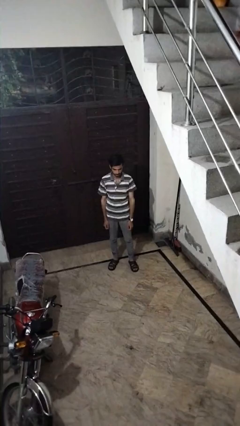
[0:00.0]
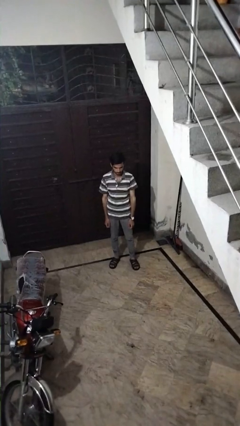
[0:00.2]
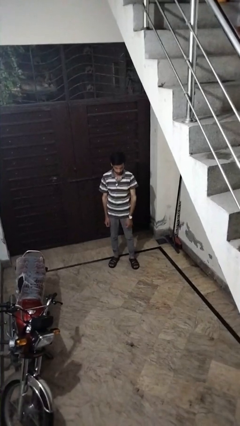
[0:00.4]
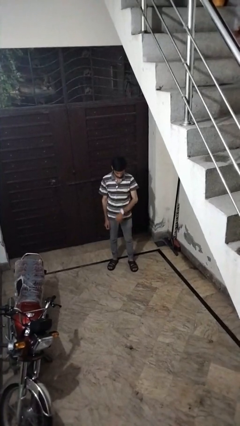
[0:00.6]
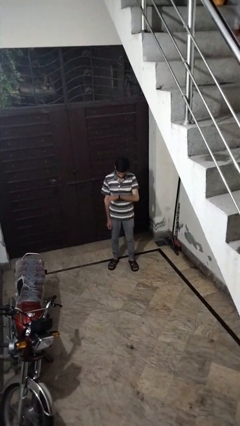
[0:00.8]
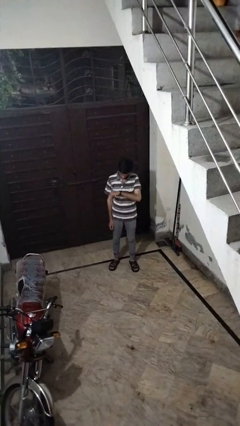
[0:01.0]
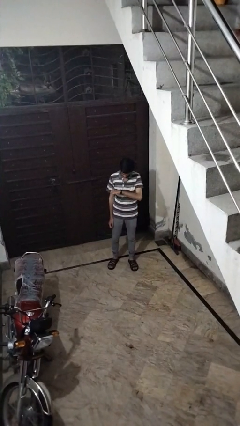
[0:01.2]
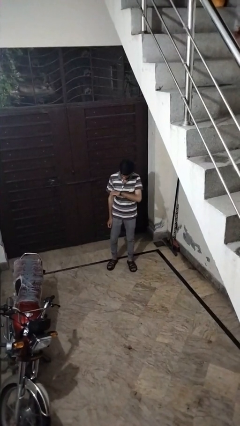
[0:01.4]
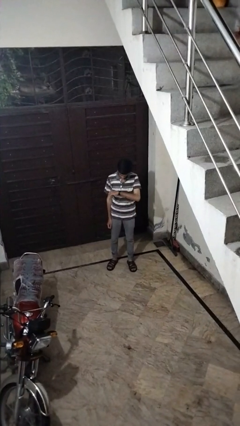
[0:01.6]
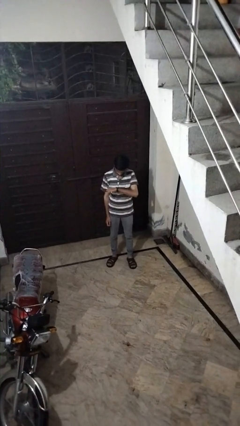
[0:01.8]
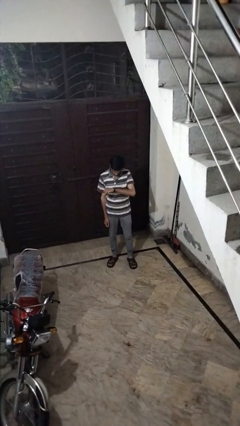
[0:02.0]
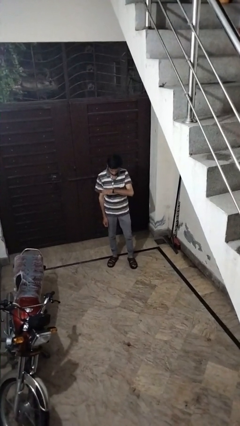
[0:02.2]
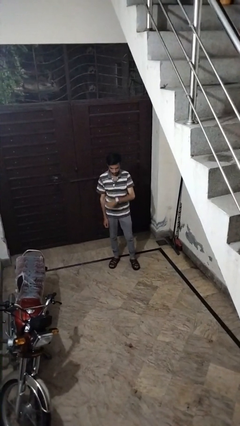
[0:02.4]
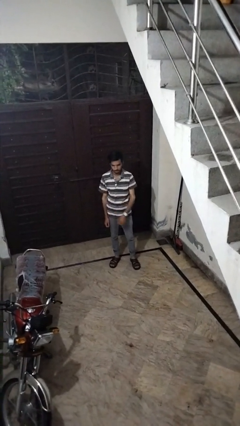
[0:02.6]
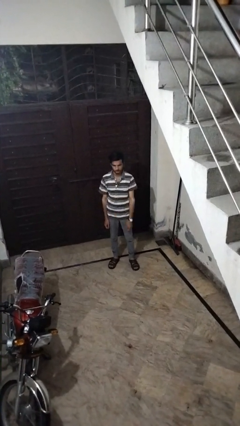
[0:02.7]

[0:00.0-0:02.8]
person looks at wristwatch

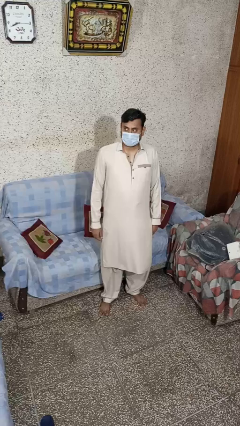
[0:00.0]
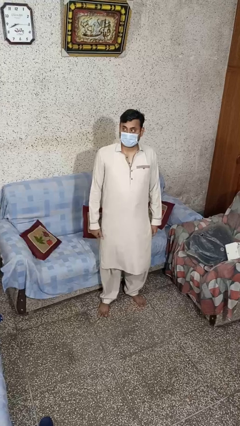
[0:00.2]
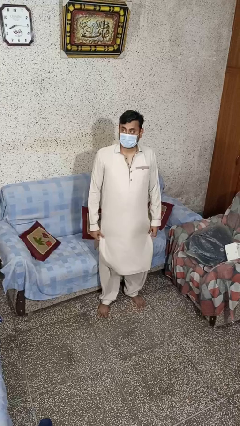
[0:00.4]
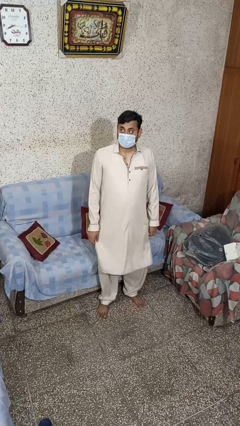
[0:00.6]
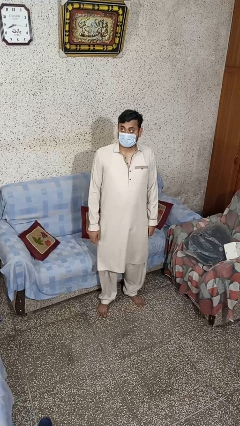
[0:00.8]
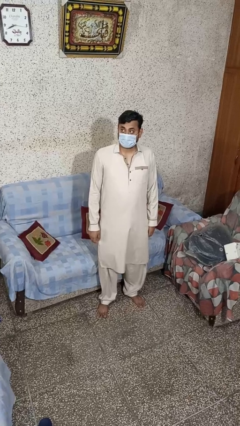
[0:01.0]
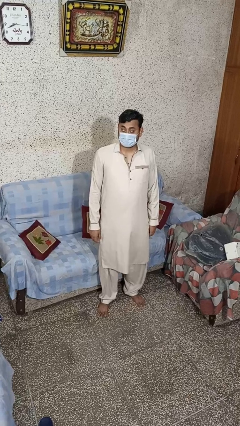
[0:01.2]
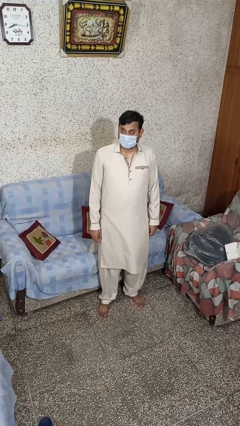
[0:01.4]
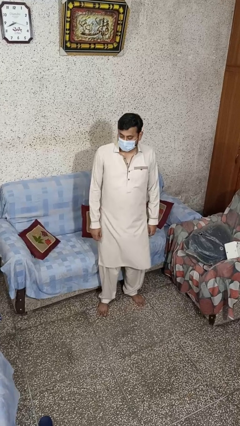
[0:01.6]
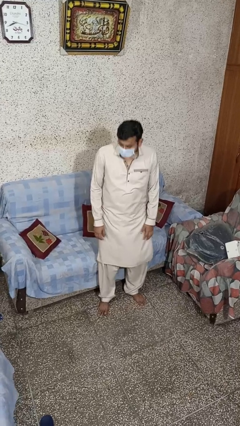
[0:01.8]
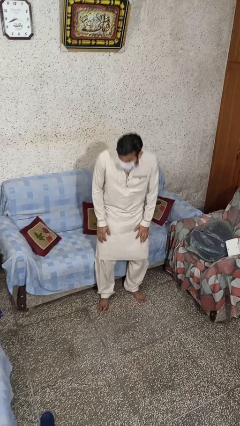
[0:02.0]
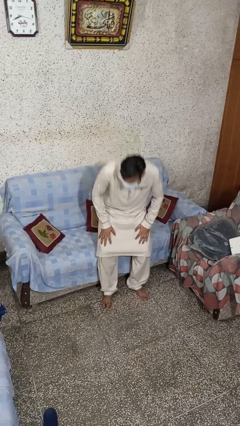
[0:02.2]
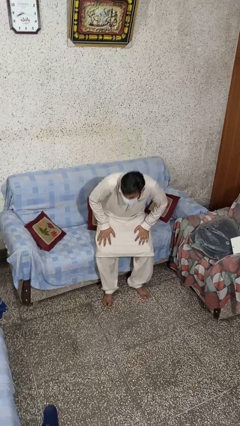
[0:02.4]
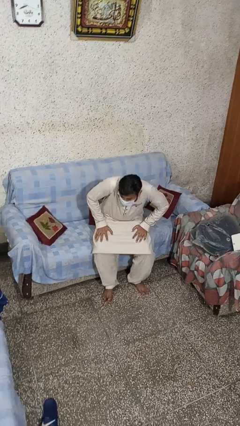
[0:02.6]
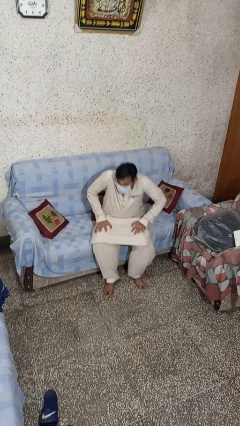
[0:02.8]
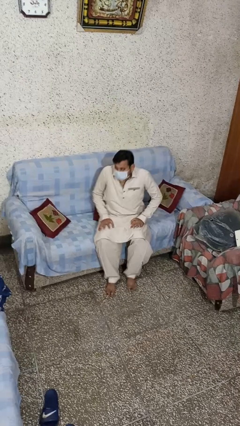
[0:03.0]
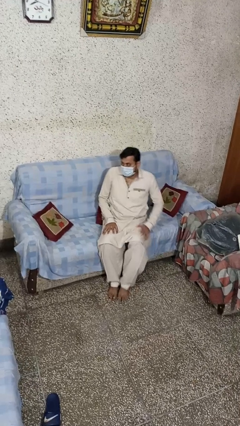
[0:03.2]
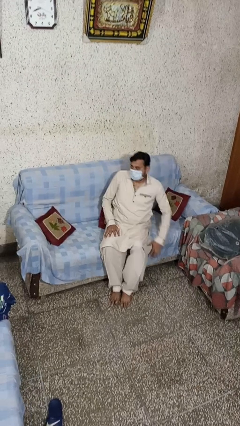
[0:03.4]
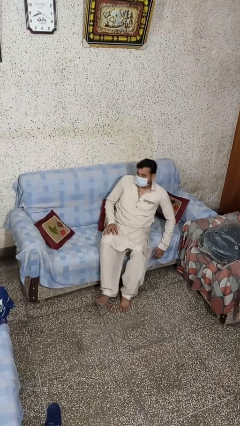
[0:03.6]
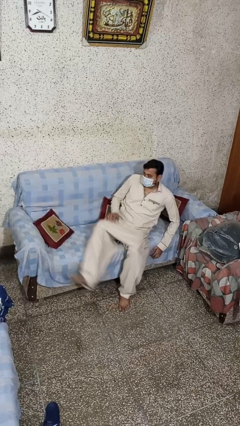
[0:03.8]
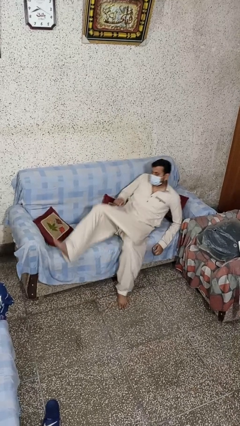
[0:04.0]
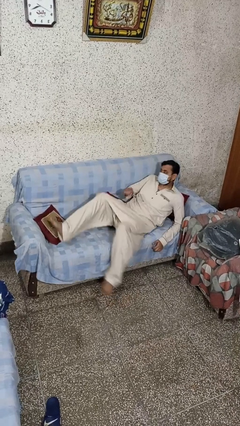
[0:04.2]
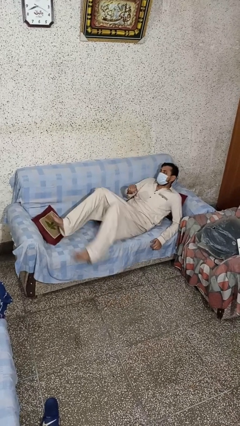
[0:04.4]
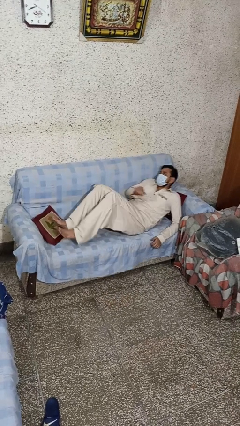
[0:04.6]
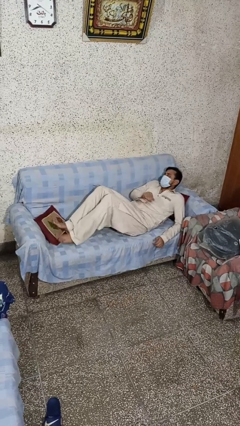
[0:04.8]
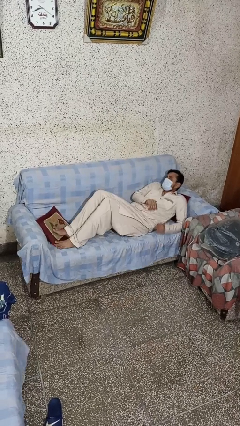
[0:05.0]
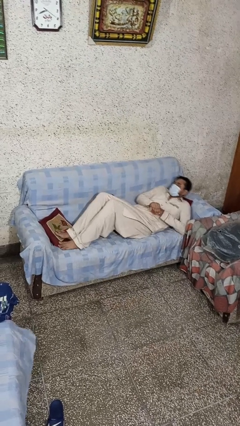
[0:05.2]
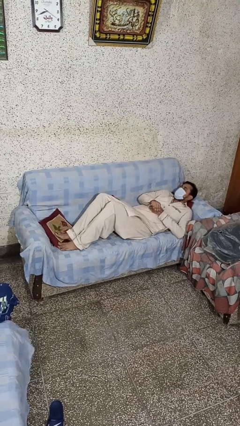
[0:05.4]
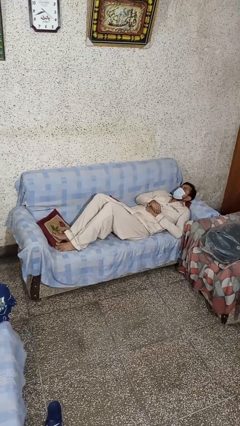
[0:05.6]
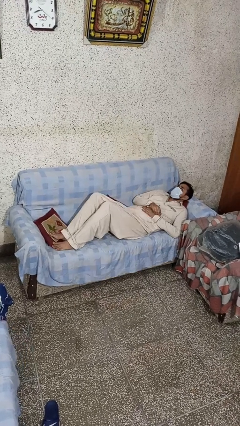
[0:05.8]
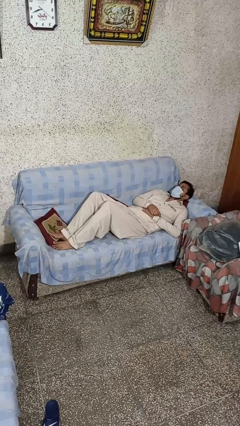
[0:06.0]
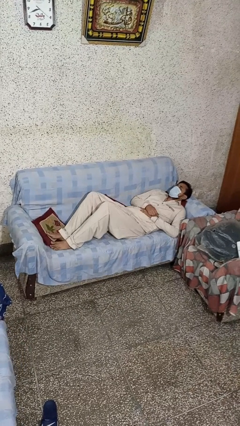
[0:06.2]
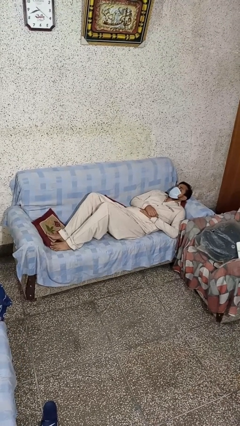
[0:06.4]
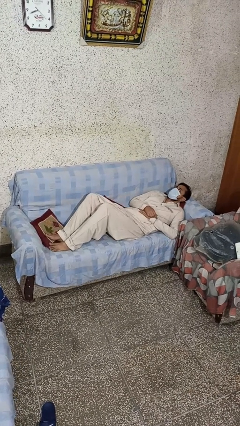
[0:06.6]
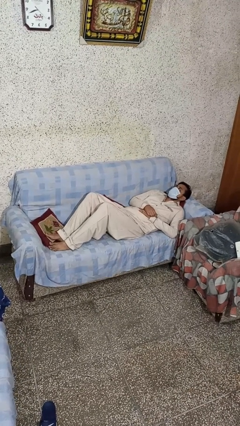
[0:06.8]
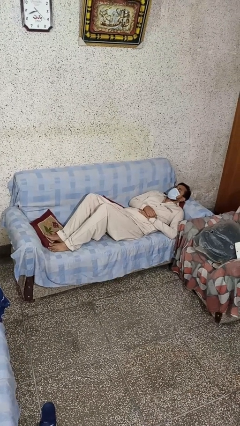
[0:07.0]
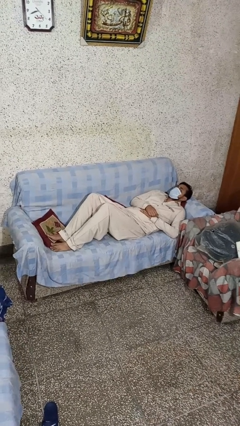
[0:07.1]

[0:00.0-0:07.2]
person lies down on couch

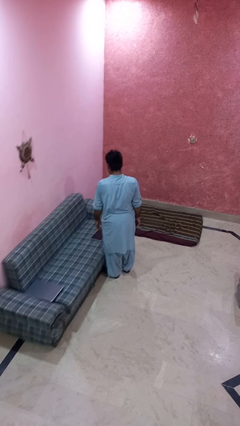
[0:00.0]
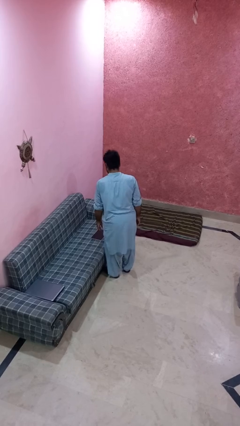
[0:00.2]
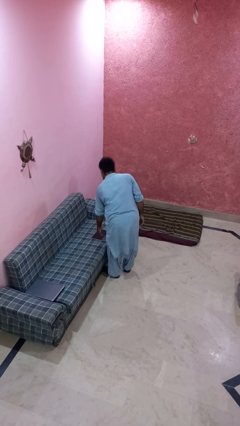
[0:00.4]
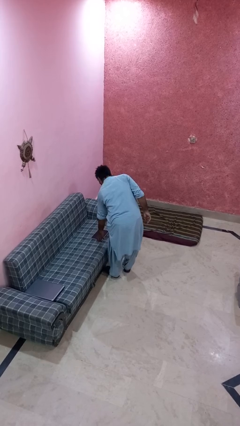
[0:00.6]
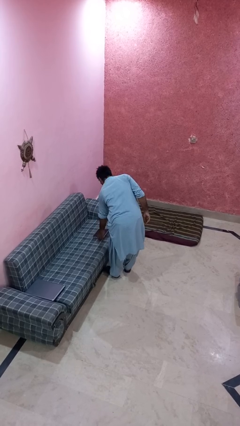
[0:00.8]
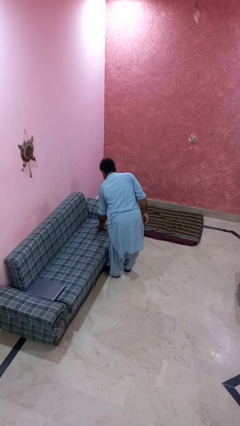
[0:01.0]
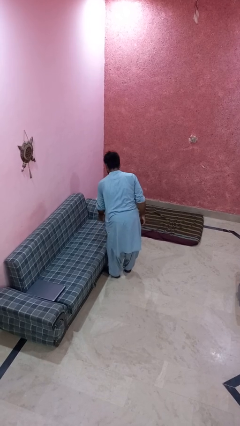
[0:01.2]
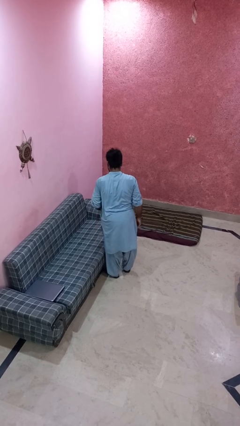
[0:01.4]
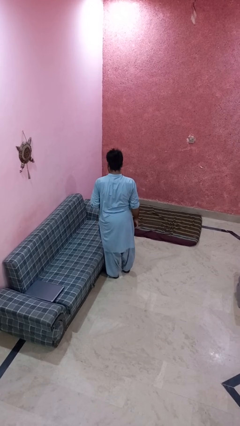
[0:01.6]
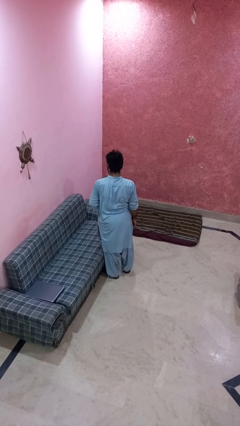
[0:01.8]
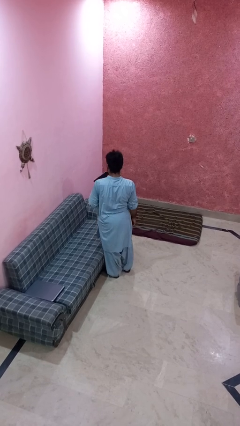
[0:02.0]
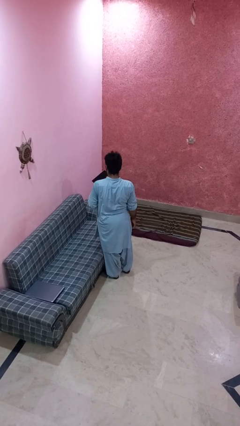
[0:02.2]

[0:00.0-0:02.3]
person picks up object from couch

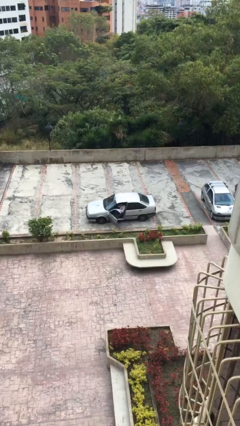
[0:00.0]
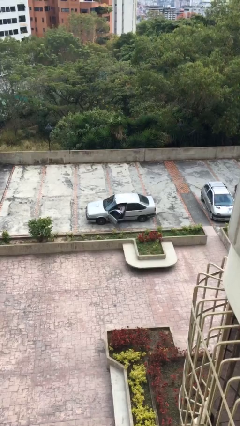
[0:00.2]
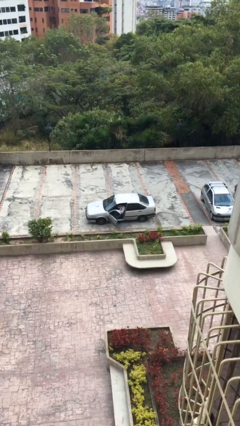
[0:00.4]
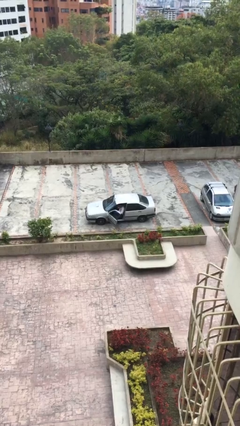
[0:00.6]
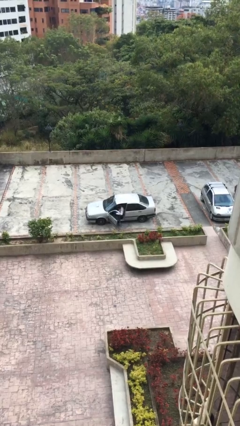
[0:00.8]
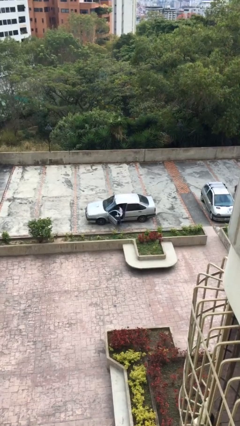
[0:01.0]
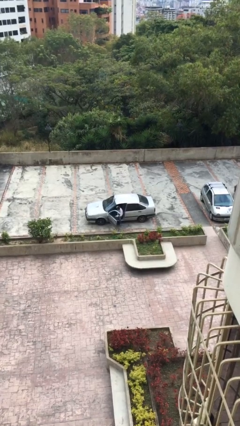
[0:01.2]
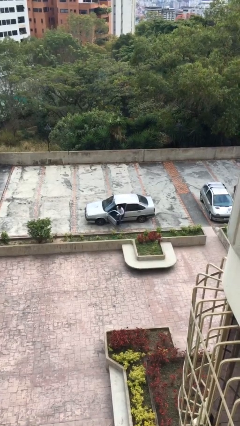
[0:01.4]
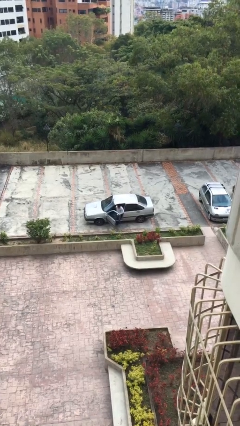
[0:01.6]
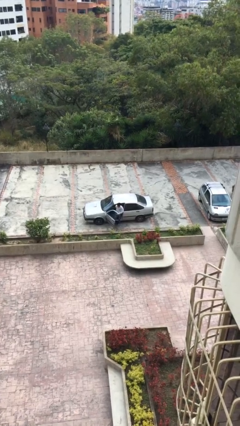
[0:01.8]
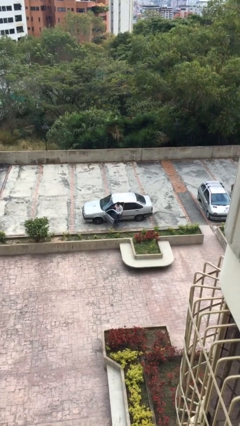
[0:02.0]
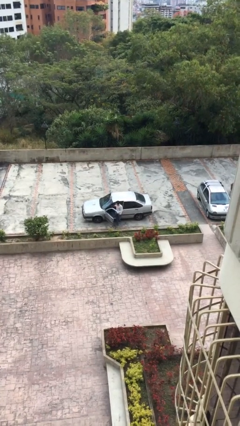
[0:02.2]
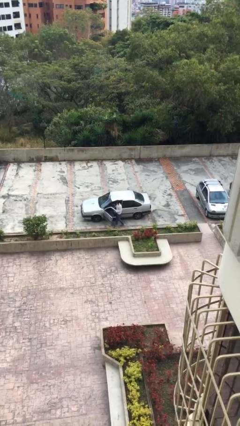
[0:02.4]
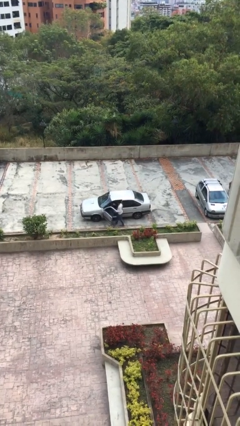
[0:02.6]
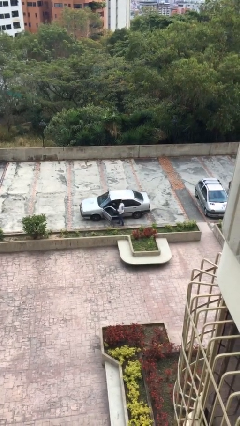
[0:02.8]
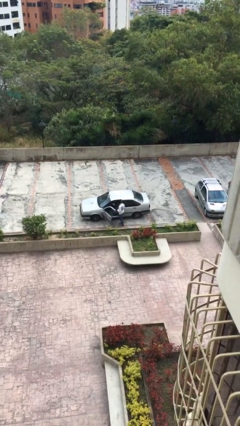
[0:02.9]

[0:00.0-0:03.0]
person exits car

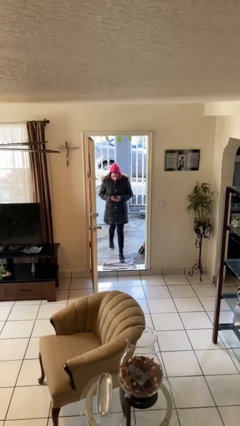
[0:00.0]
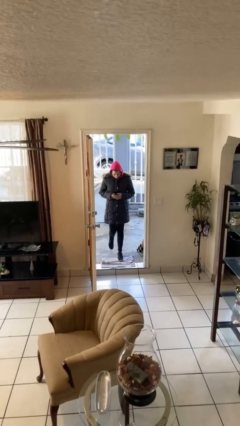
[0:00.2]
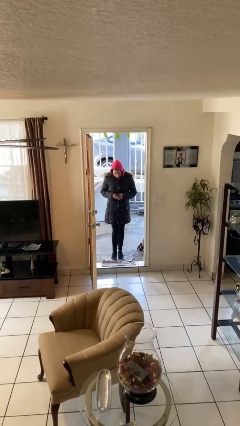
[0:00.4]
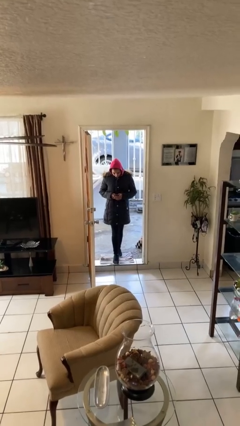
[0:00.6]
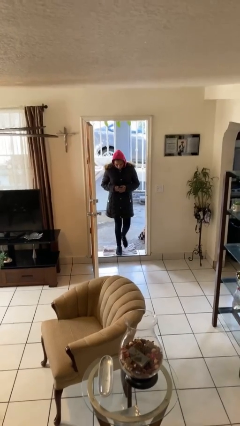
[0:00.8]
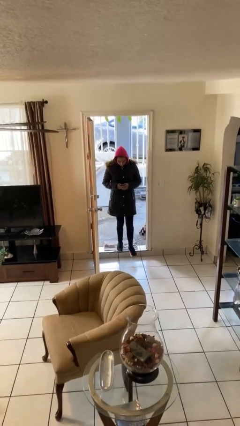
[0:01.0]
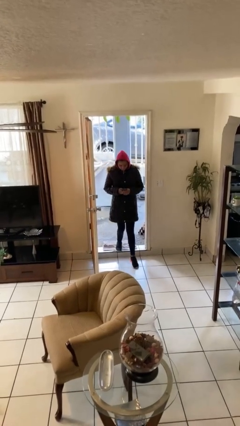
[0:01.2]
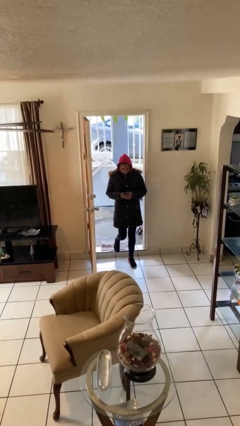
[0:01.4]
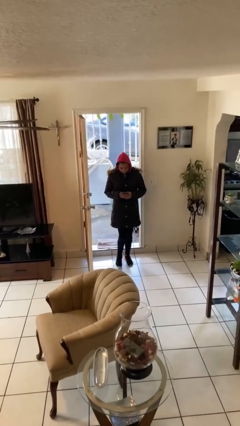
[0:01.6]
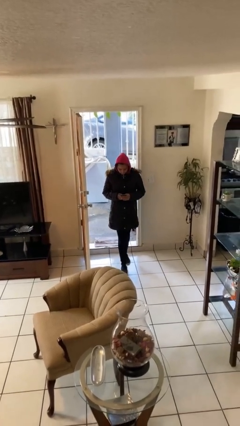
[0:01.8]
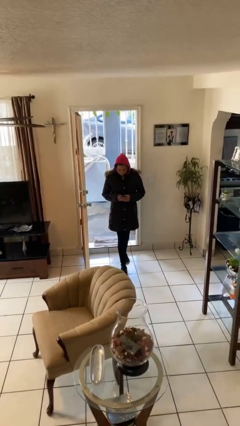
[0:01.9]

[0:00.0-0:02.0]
person enters scene through structure

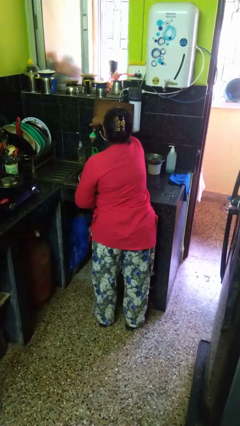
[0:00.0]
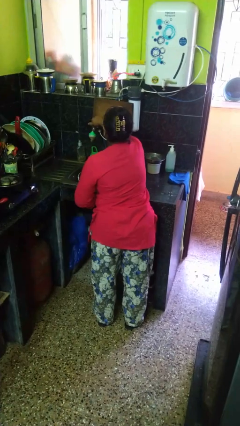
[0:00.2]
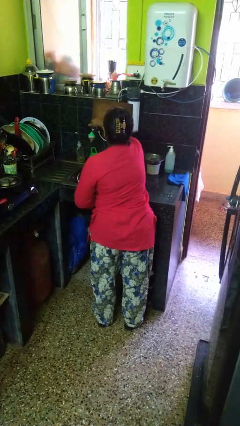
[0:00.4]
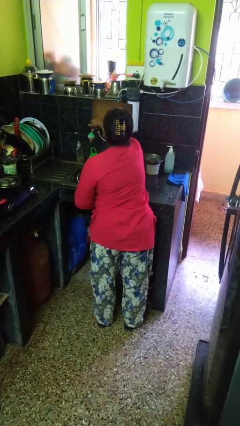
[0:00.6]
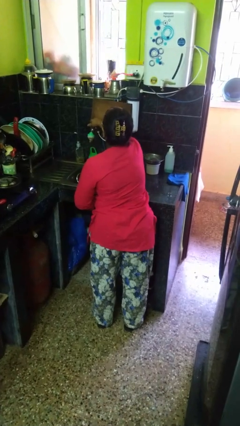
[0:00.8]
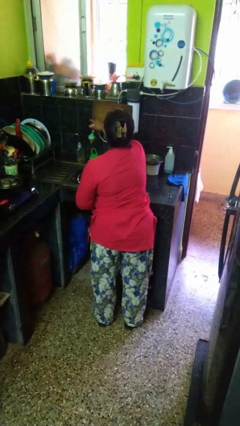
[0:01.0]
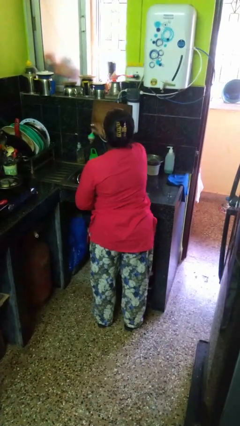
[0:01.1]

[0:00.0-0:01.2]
person turns off faucet
